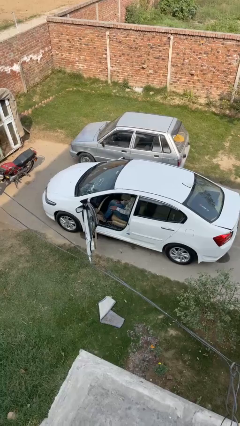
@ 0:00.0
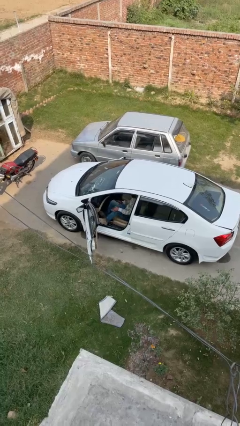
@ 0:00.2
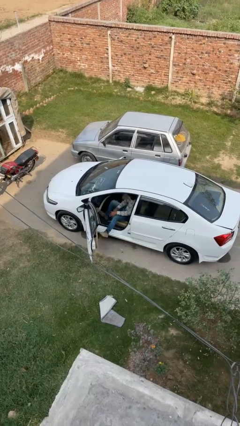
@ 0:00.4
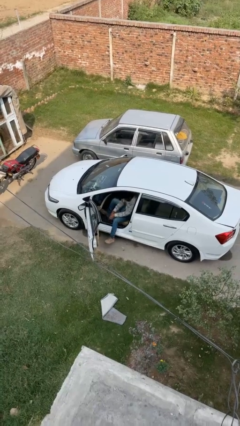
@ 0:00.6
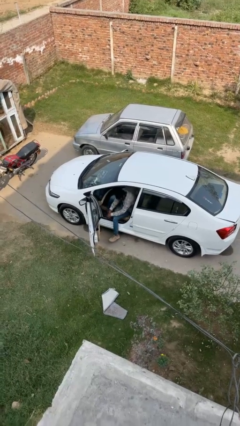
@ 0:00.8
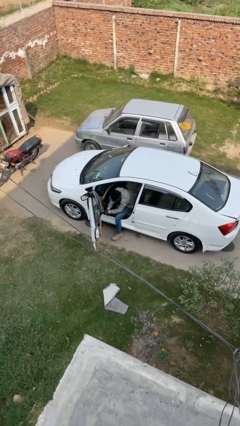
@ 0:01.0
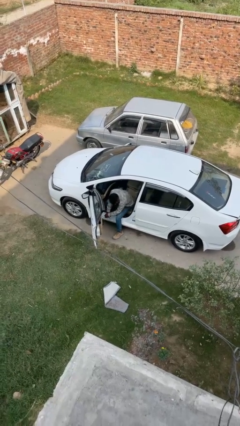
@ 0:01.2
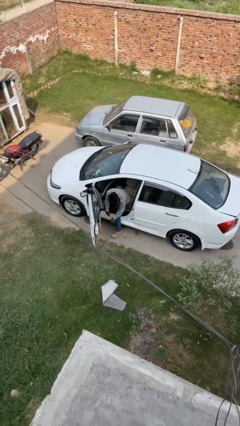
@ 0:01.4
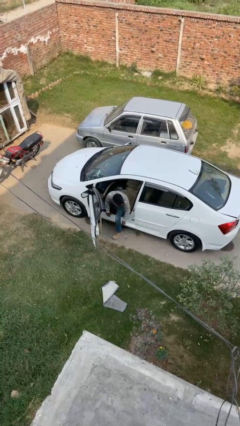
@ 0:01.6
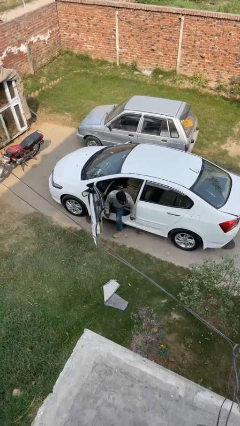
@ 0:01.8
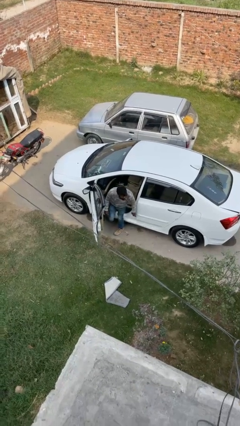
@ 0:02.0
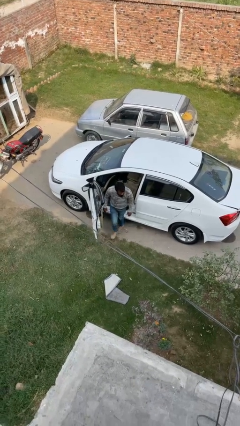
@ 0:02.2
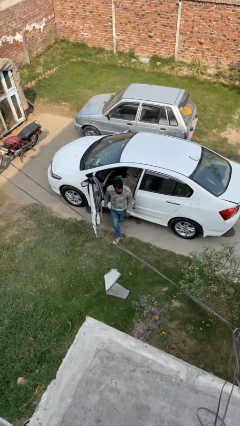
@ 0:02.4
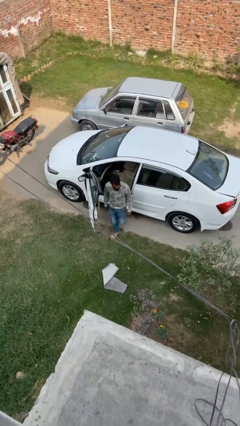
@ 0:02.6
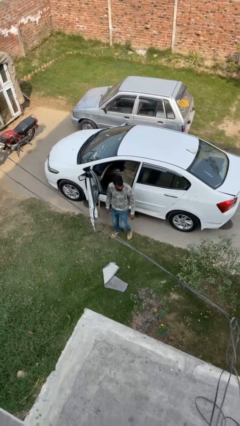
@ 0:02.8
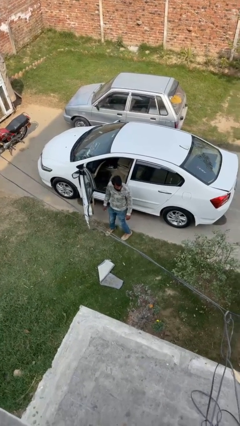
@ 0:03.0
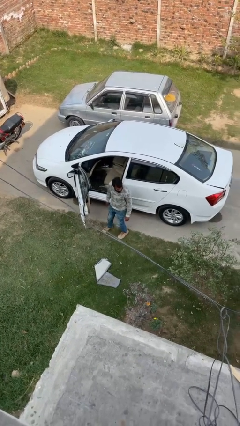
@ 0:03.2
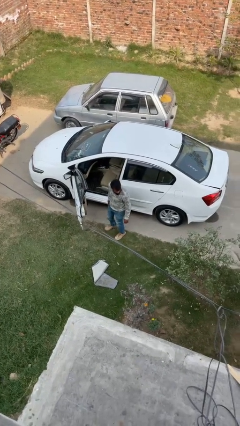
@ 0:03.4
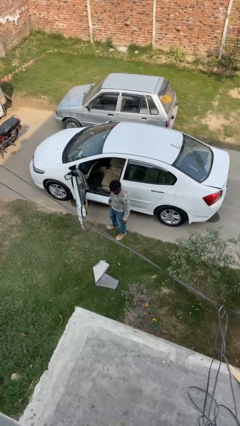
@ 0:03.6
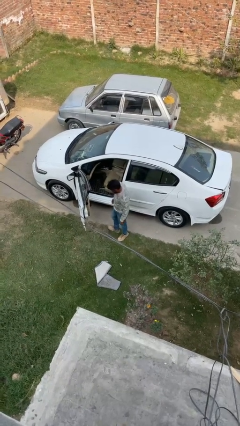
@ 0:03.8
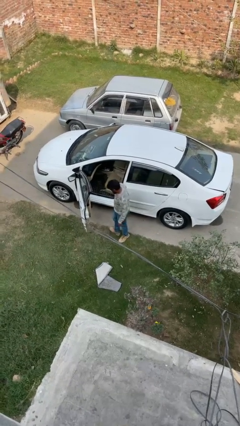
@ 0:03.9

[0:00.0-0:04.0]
person exits car

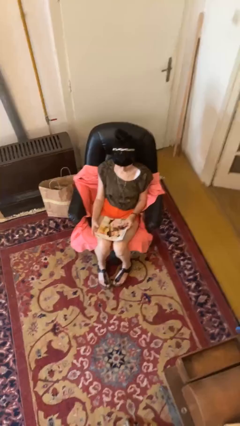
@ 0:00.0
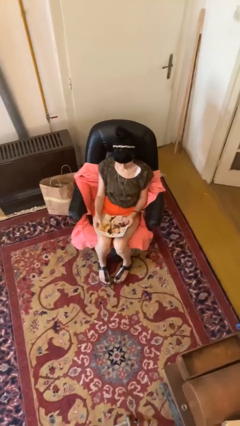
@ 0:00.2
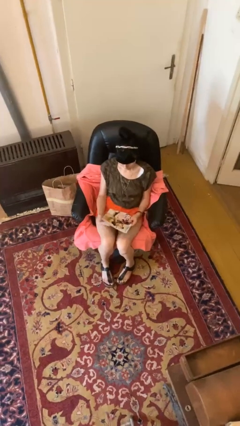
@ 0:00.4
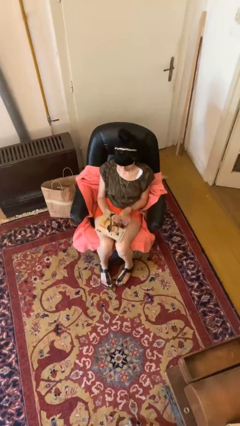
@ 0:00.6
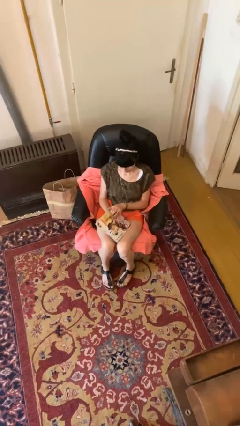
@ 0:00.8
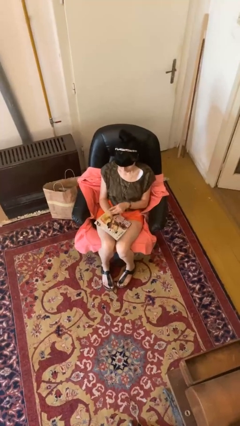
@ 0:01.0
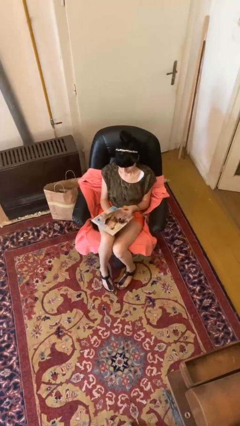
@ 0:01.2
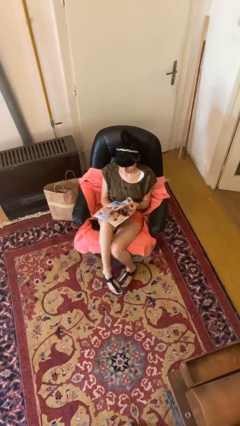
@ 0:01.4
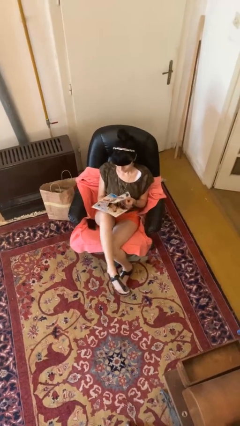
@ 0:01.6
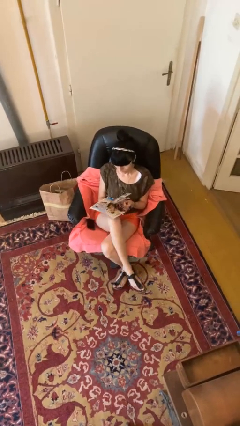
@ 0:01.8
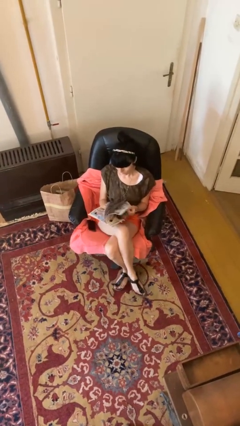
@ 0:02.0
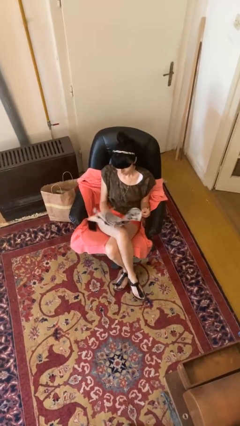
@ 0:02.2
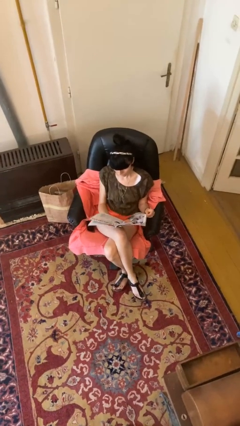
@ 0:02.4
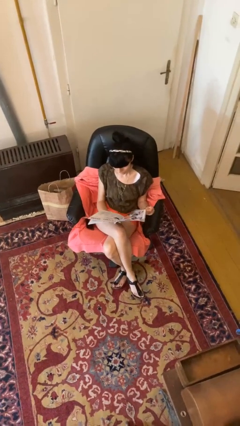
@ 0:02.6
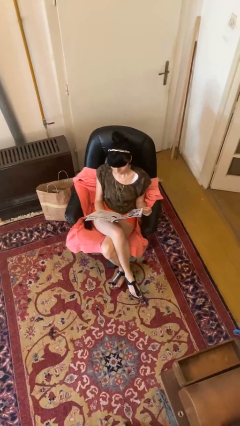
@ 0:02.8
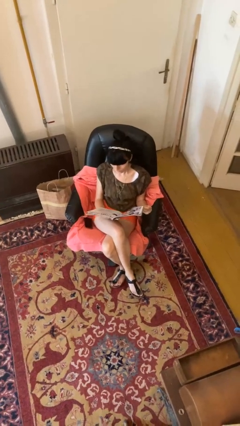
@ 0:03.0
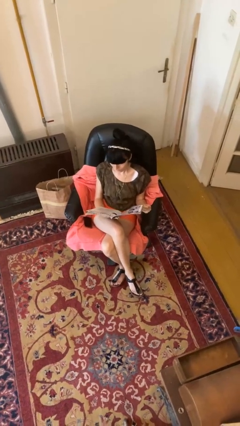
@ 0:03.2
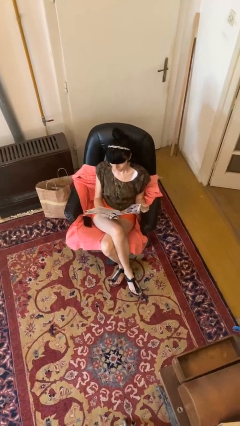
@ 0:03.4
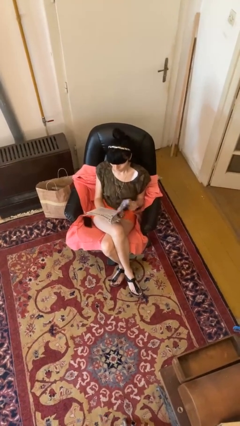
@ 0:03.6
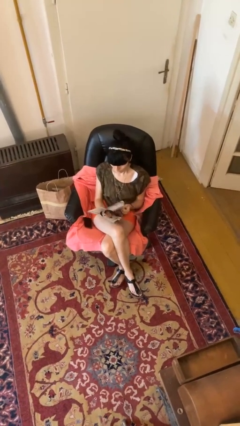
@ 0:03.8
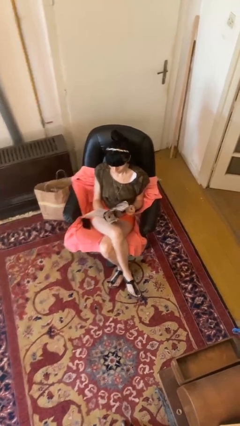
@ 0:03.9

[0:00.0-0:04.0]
person reads magazine

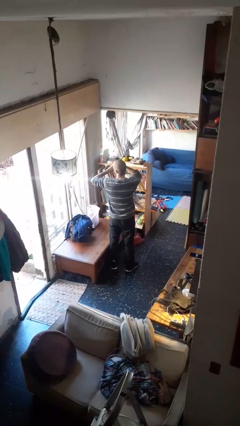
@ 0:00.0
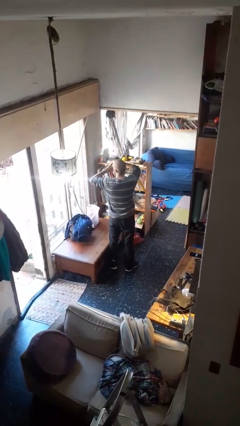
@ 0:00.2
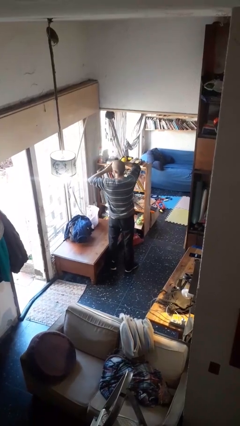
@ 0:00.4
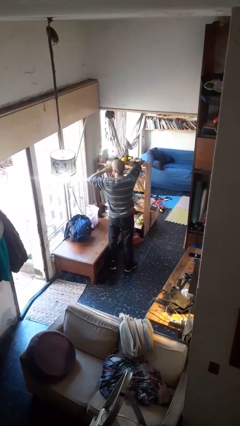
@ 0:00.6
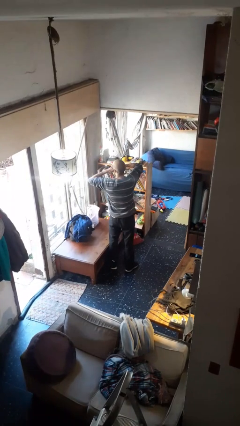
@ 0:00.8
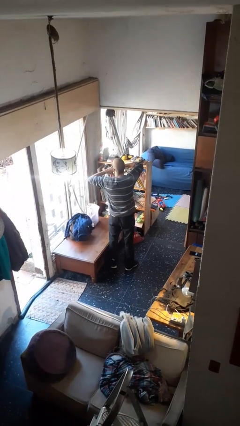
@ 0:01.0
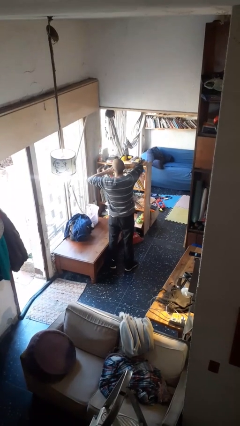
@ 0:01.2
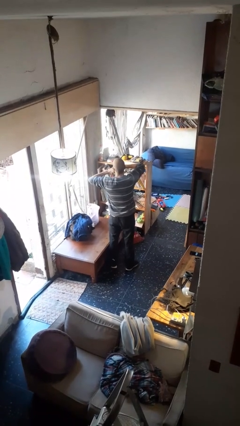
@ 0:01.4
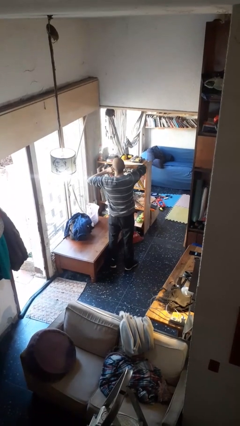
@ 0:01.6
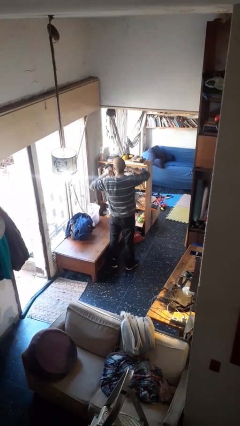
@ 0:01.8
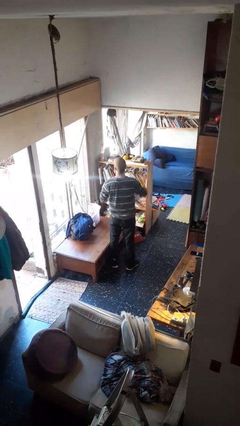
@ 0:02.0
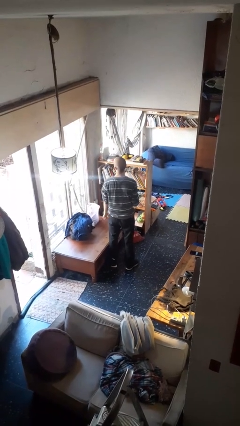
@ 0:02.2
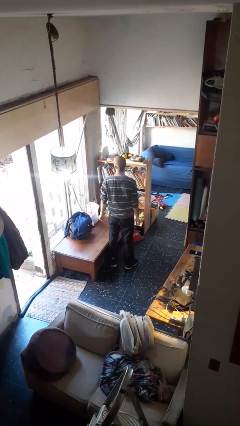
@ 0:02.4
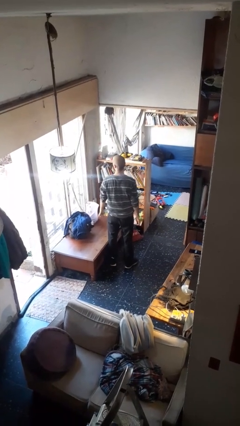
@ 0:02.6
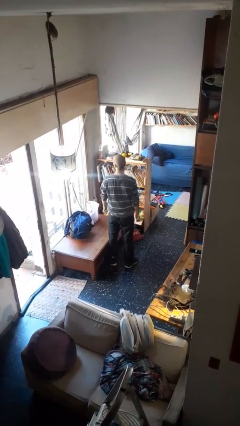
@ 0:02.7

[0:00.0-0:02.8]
person takes off ring

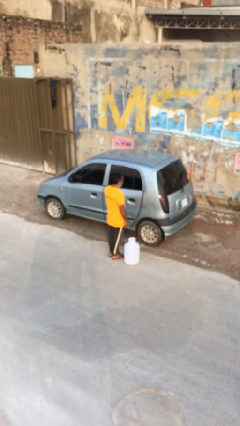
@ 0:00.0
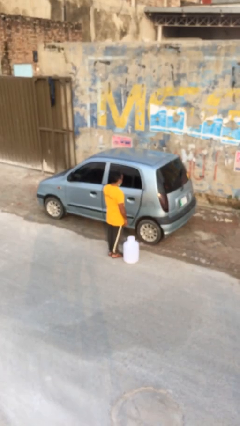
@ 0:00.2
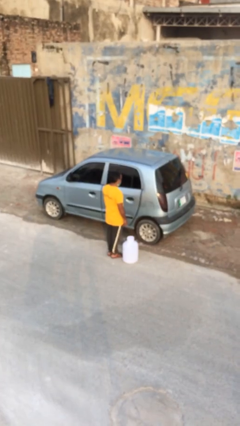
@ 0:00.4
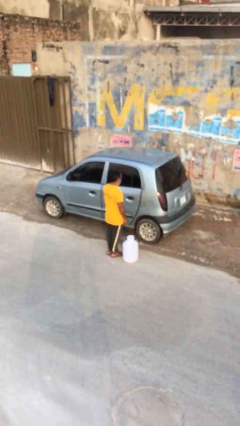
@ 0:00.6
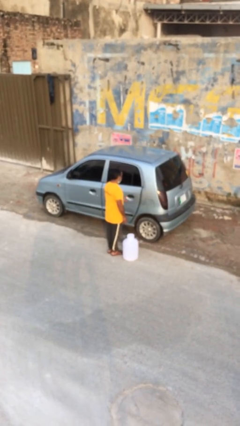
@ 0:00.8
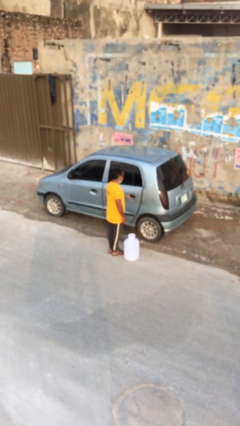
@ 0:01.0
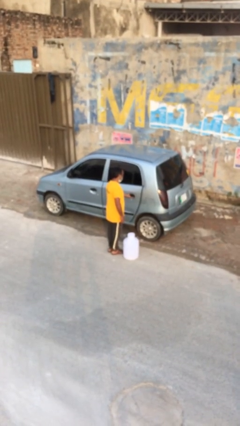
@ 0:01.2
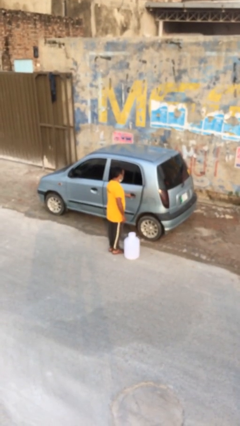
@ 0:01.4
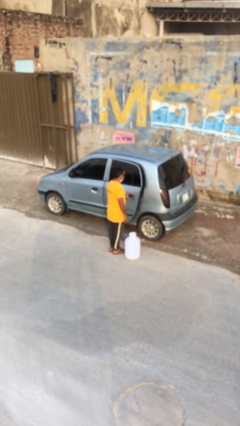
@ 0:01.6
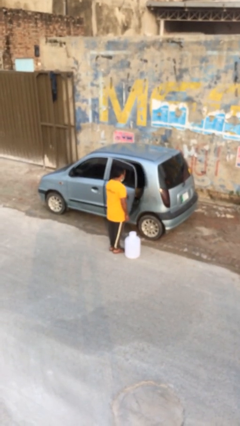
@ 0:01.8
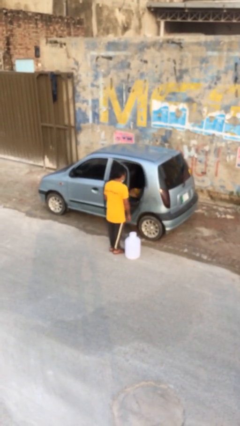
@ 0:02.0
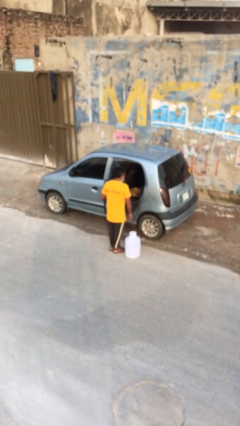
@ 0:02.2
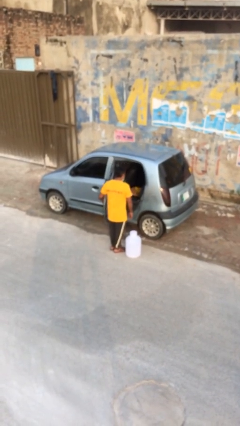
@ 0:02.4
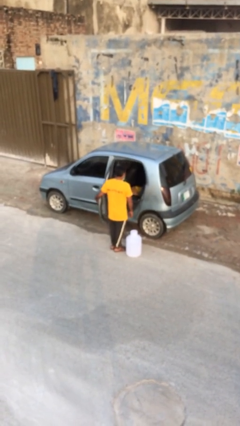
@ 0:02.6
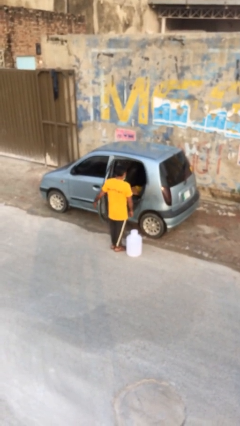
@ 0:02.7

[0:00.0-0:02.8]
person opens car door

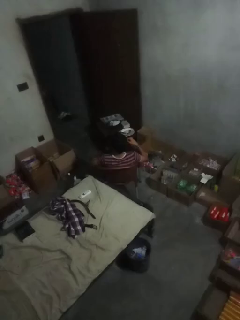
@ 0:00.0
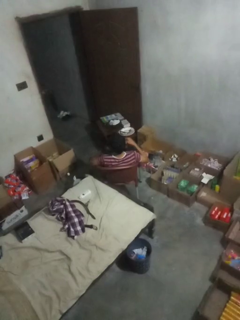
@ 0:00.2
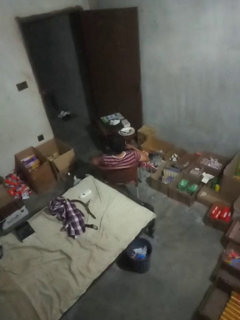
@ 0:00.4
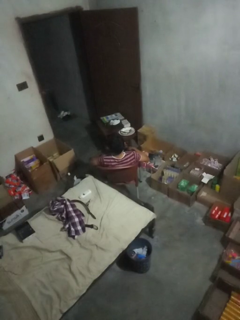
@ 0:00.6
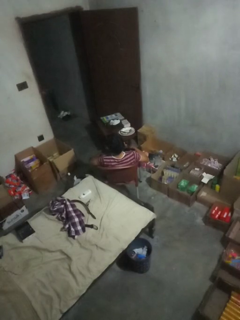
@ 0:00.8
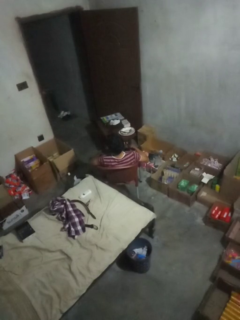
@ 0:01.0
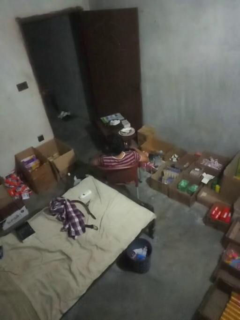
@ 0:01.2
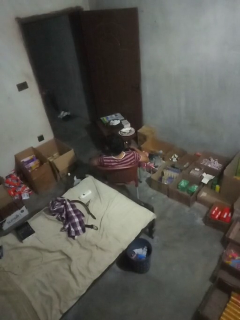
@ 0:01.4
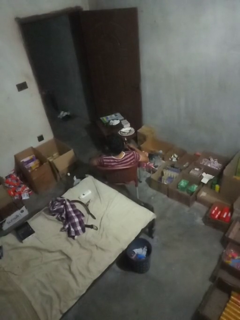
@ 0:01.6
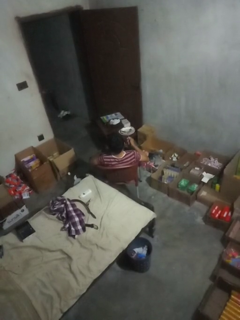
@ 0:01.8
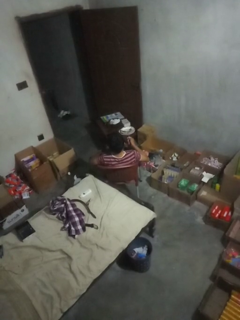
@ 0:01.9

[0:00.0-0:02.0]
person brushes teeth

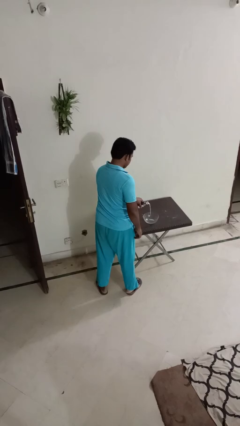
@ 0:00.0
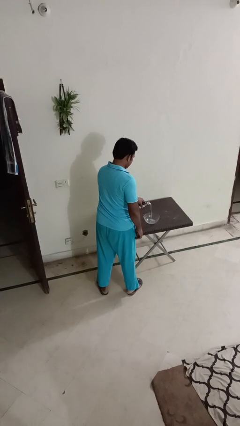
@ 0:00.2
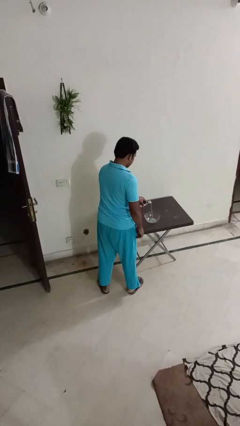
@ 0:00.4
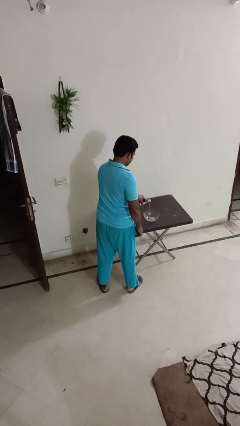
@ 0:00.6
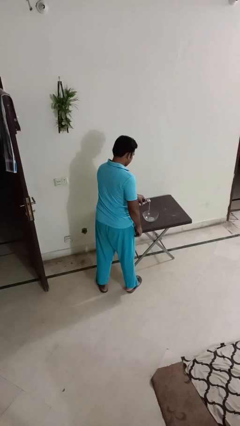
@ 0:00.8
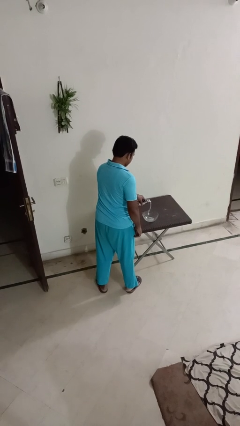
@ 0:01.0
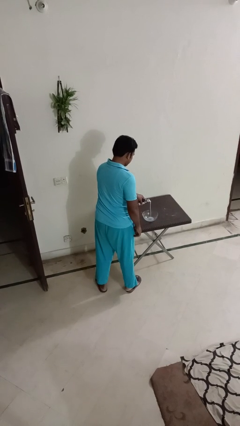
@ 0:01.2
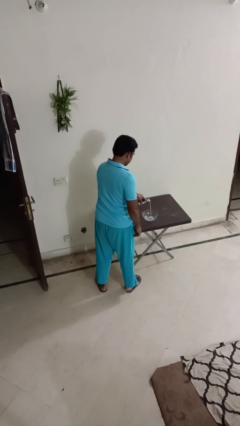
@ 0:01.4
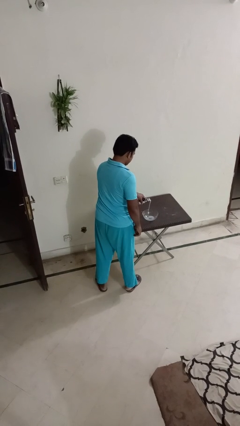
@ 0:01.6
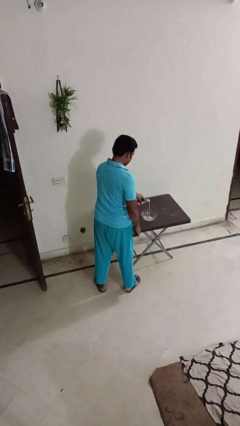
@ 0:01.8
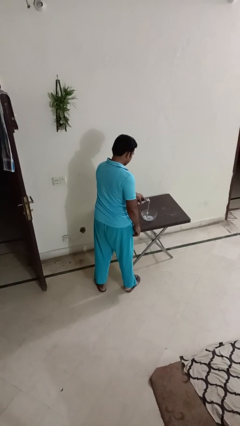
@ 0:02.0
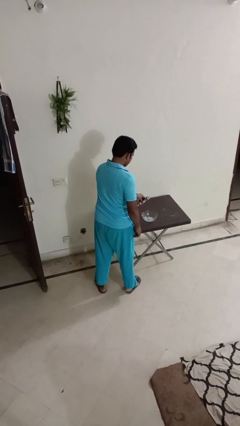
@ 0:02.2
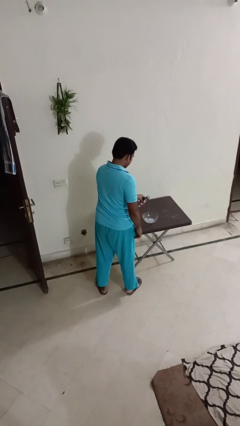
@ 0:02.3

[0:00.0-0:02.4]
person pours into bowl
